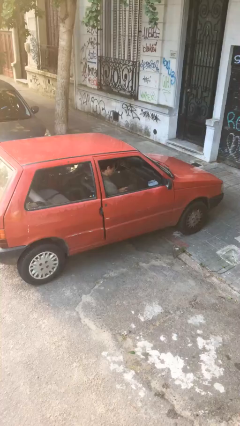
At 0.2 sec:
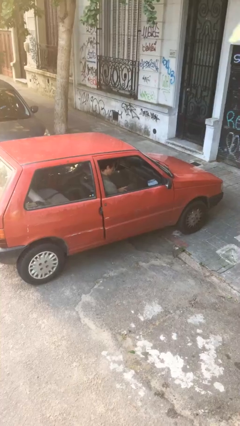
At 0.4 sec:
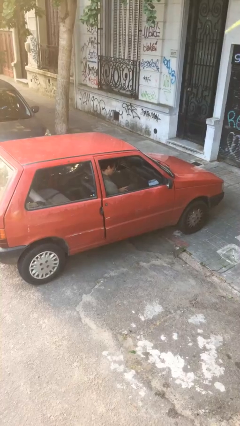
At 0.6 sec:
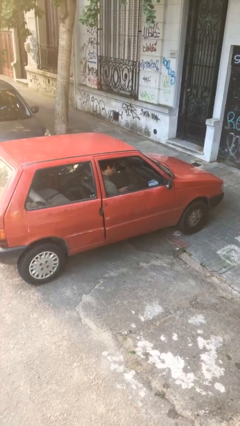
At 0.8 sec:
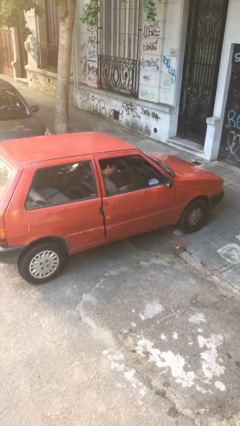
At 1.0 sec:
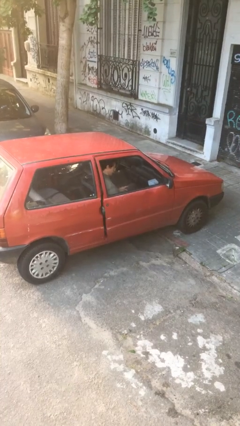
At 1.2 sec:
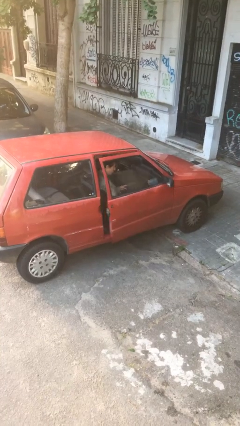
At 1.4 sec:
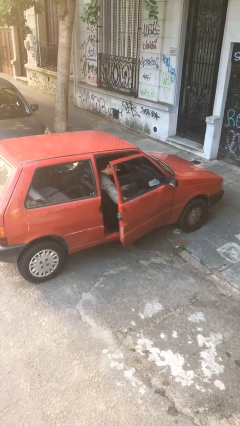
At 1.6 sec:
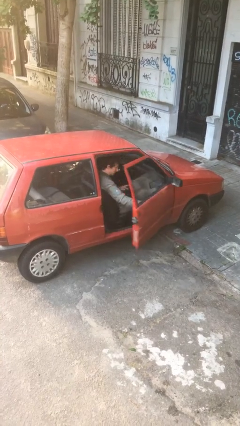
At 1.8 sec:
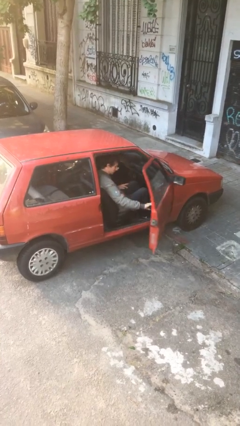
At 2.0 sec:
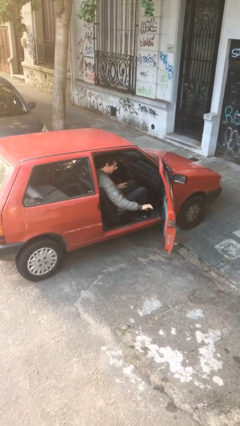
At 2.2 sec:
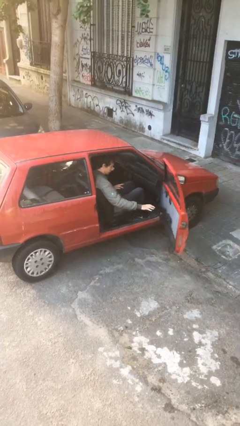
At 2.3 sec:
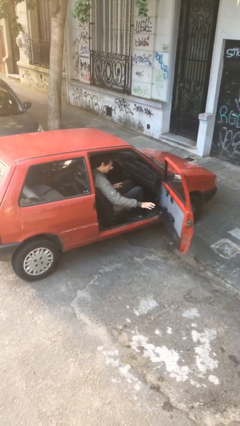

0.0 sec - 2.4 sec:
person opens car door

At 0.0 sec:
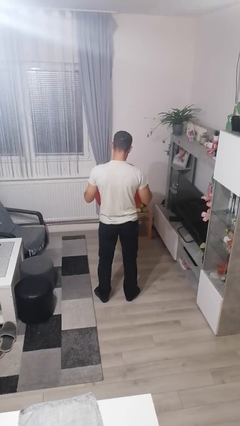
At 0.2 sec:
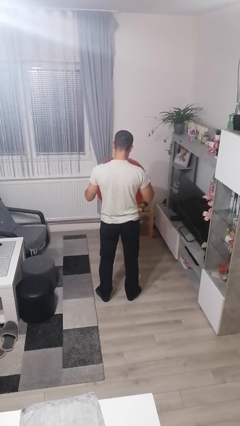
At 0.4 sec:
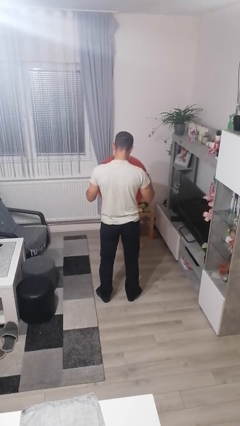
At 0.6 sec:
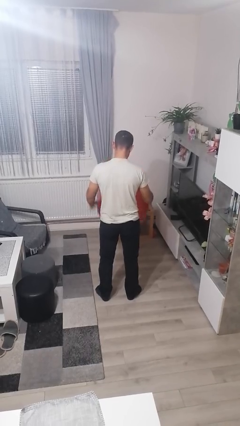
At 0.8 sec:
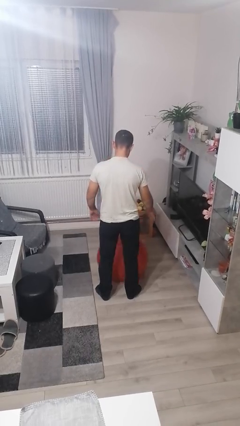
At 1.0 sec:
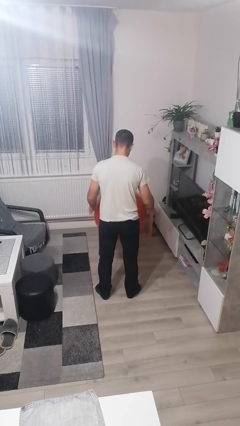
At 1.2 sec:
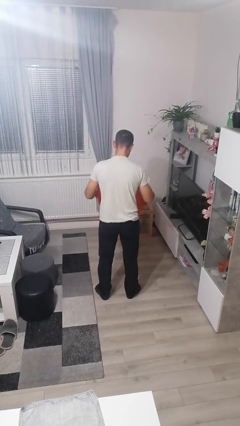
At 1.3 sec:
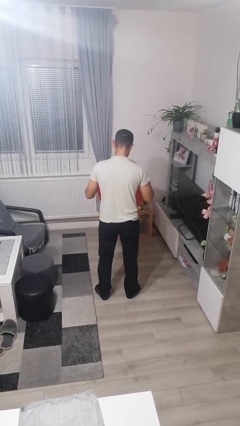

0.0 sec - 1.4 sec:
person bounces ball on floor

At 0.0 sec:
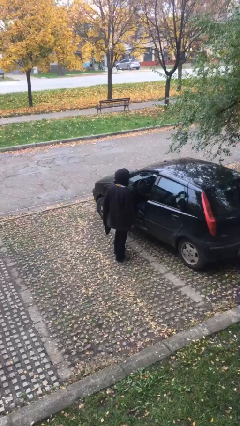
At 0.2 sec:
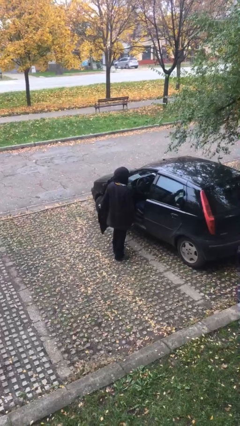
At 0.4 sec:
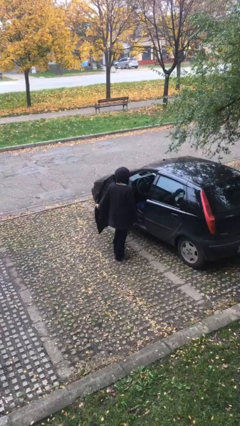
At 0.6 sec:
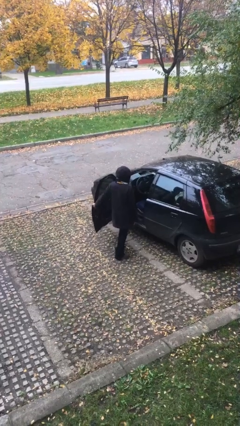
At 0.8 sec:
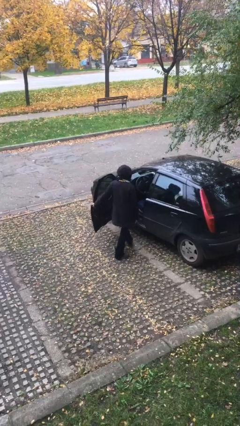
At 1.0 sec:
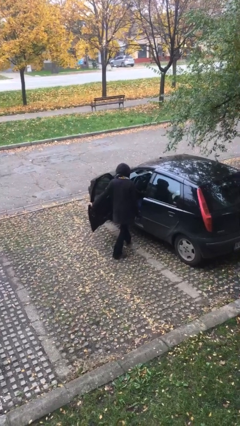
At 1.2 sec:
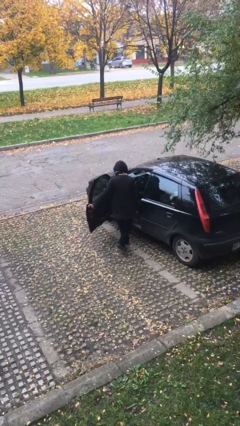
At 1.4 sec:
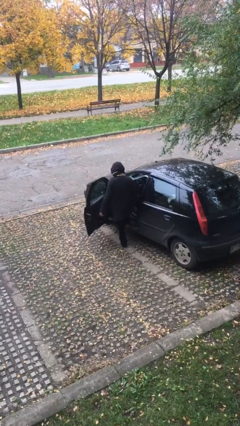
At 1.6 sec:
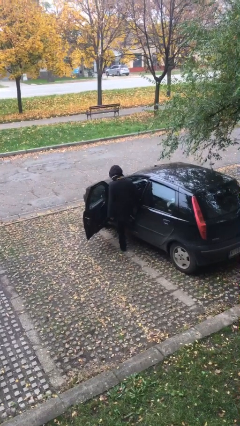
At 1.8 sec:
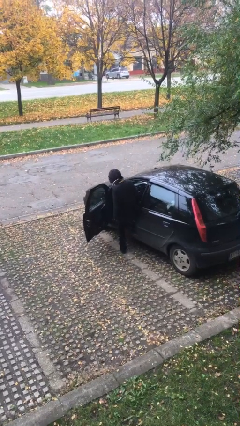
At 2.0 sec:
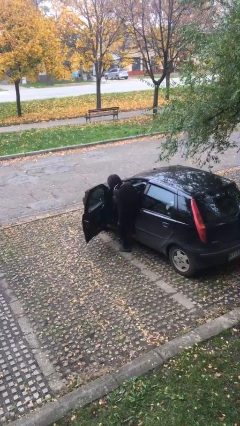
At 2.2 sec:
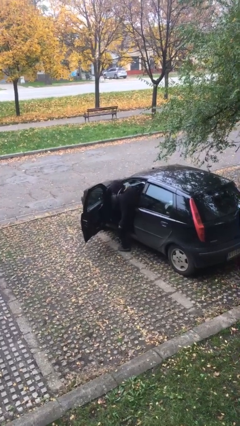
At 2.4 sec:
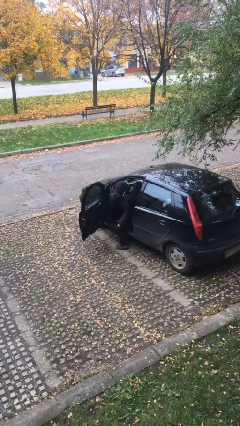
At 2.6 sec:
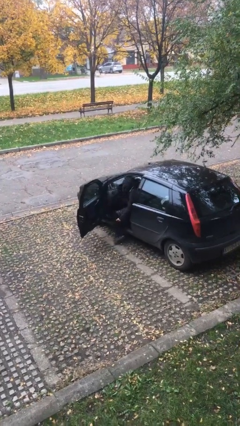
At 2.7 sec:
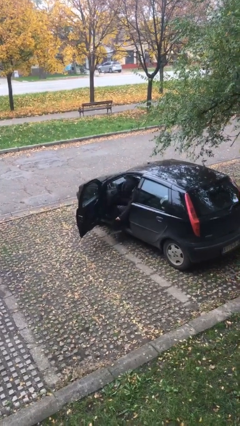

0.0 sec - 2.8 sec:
person enters car

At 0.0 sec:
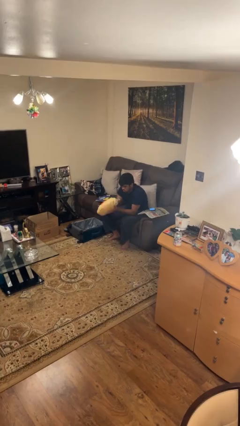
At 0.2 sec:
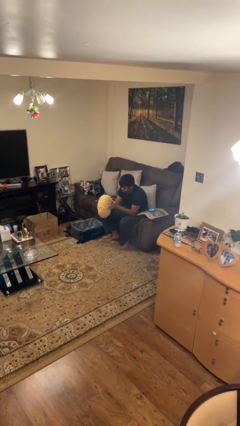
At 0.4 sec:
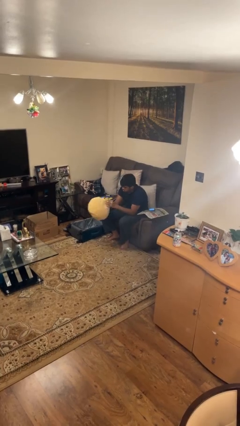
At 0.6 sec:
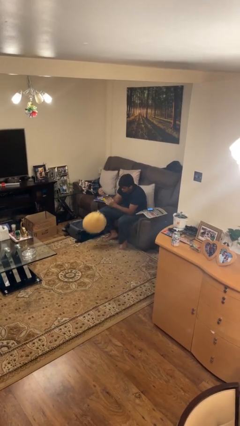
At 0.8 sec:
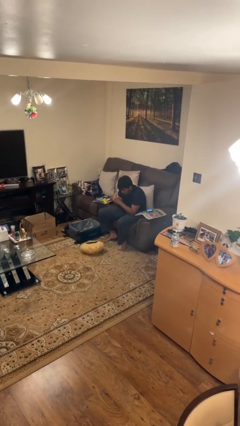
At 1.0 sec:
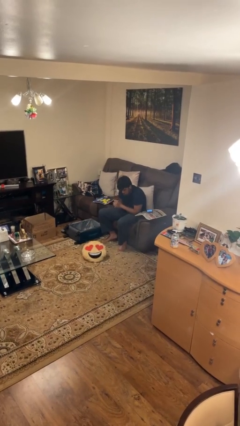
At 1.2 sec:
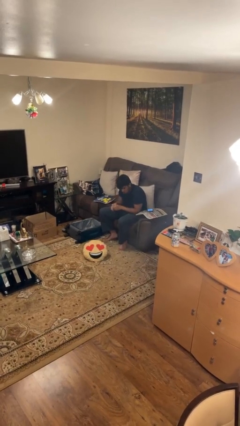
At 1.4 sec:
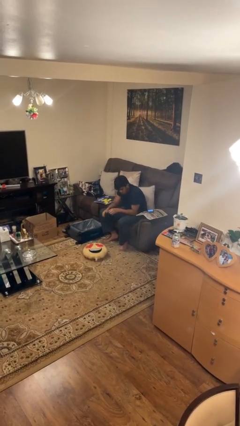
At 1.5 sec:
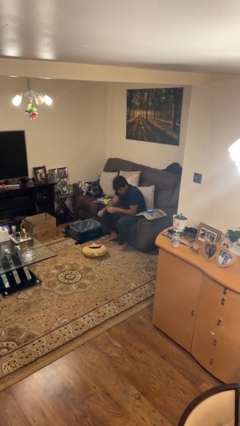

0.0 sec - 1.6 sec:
person drops object

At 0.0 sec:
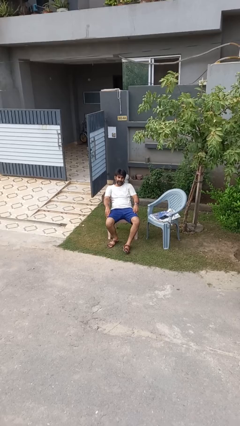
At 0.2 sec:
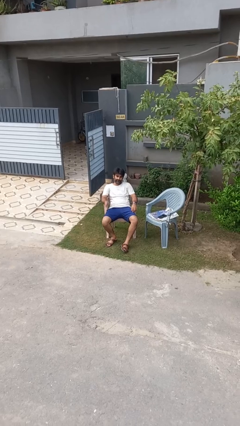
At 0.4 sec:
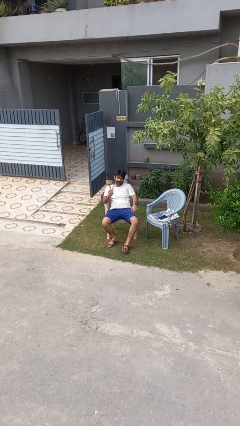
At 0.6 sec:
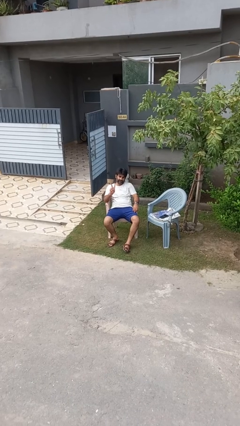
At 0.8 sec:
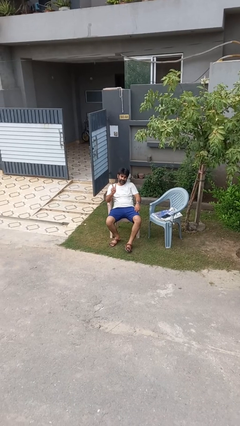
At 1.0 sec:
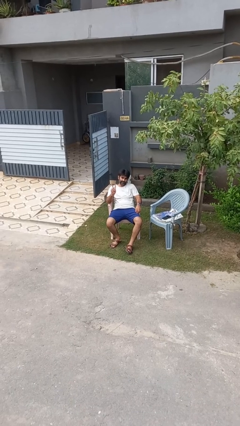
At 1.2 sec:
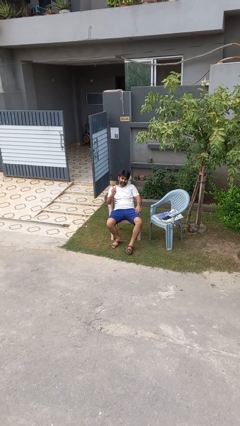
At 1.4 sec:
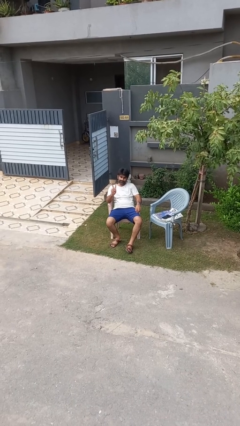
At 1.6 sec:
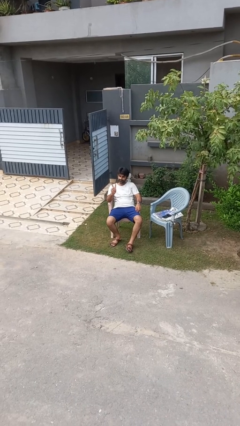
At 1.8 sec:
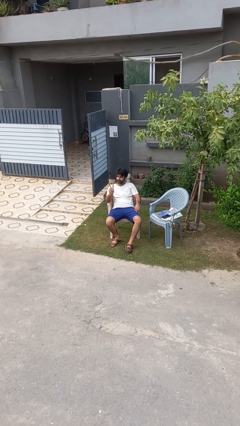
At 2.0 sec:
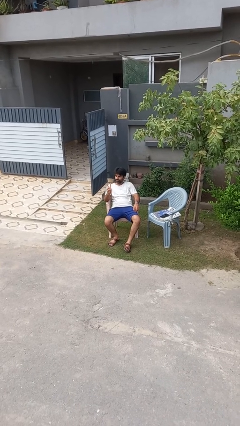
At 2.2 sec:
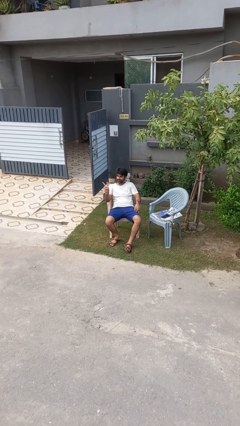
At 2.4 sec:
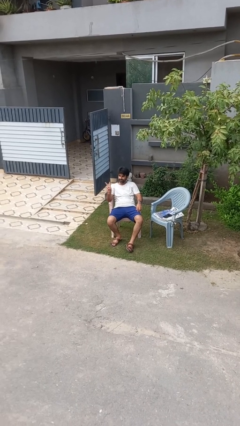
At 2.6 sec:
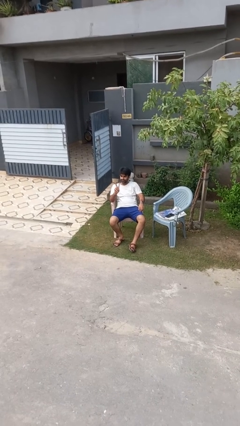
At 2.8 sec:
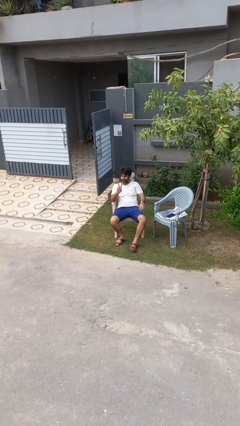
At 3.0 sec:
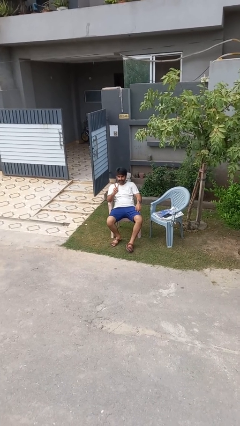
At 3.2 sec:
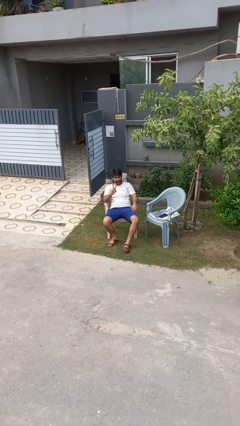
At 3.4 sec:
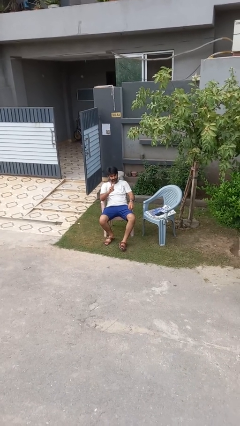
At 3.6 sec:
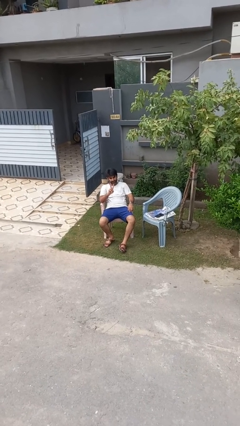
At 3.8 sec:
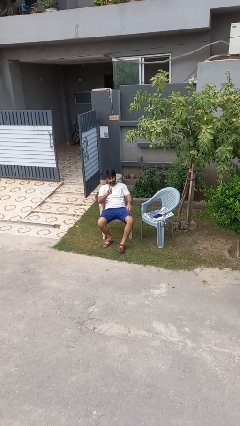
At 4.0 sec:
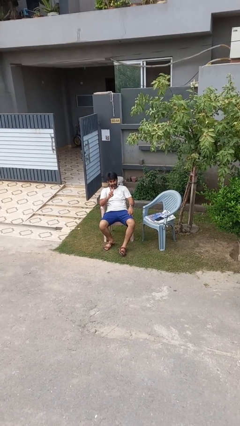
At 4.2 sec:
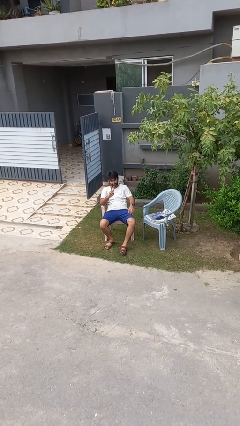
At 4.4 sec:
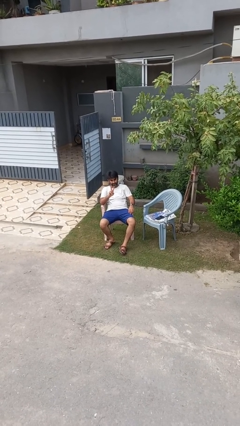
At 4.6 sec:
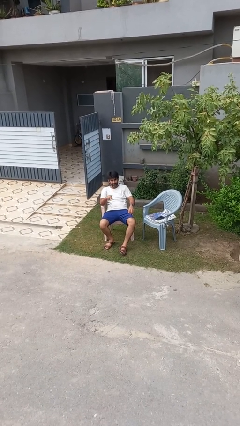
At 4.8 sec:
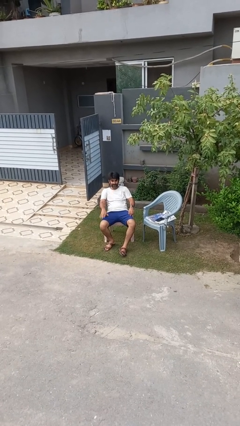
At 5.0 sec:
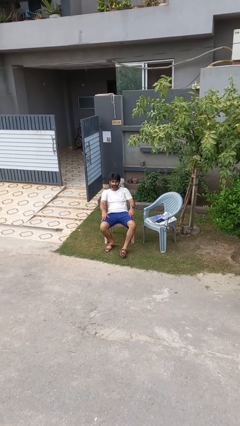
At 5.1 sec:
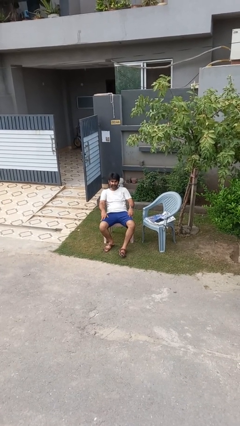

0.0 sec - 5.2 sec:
person gestures peace

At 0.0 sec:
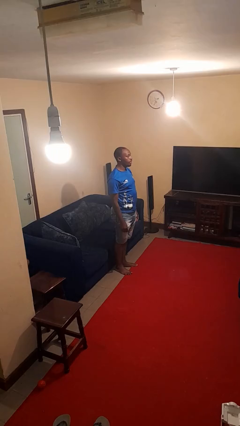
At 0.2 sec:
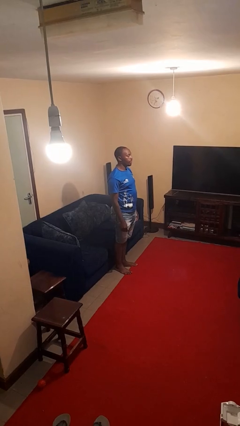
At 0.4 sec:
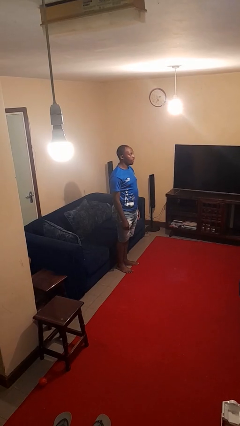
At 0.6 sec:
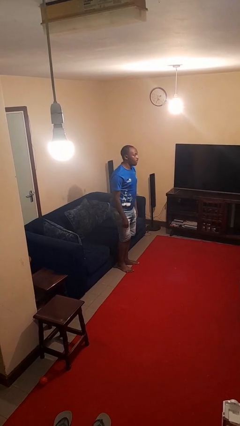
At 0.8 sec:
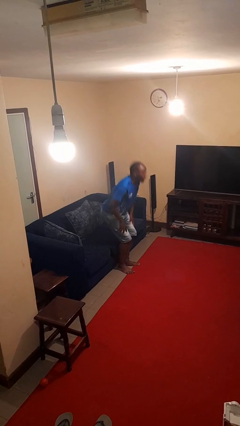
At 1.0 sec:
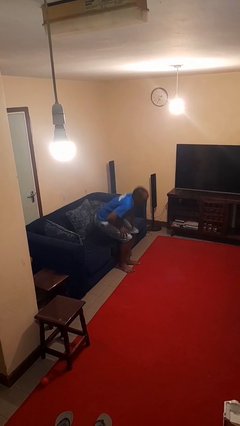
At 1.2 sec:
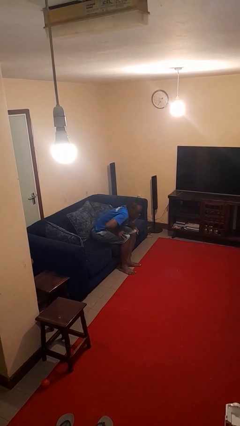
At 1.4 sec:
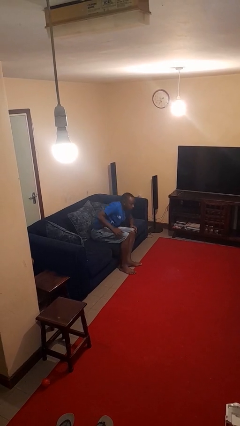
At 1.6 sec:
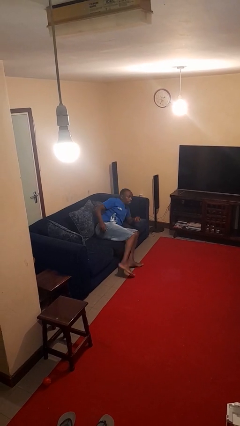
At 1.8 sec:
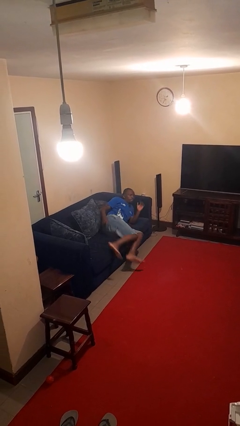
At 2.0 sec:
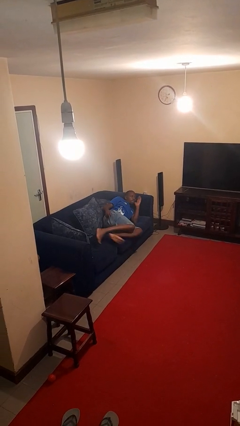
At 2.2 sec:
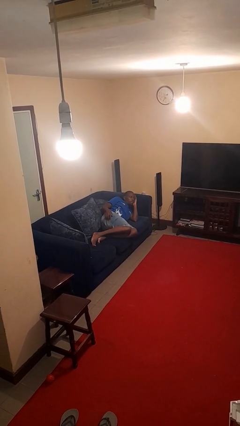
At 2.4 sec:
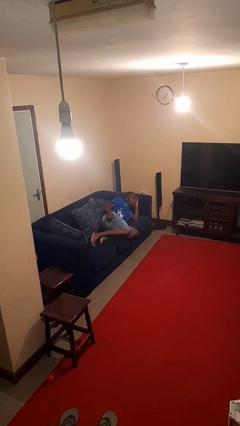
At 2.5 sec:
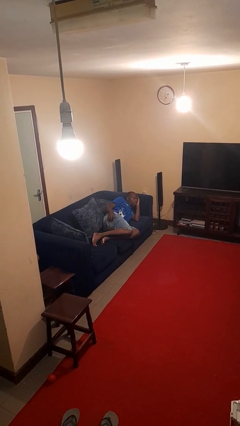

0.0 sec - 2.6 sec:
person lies down on couch

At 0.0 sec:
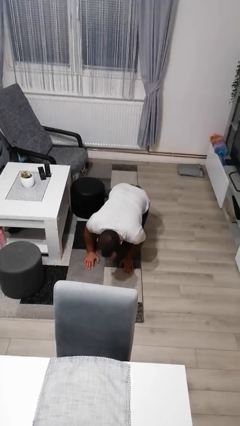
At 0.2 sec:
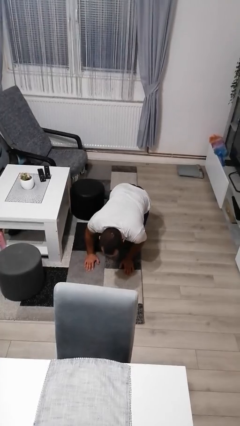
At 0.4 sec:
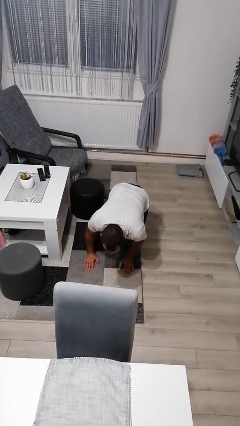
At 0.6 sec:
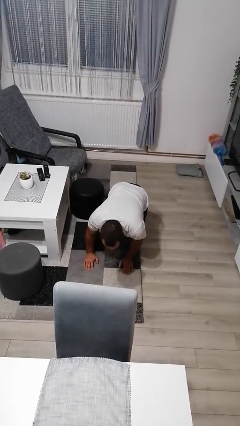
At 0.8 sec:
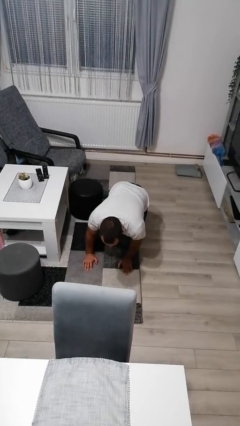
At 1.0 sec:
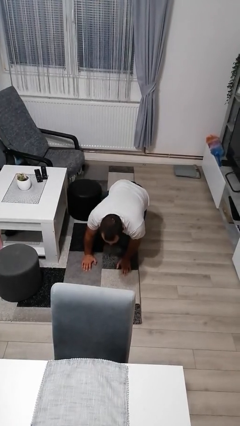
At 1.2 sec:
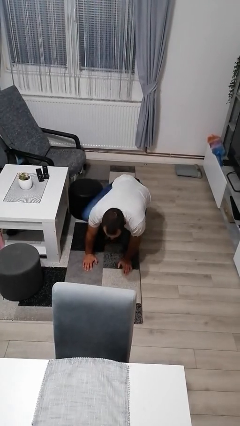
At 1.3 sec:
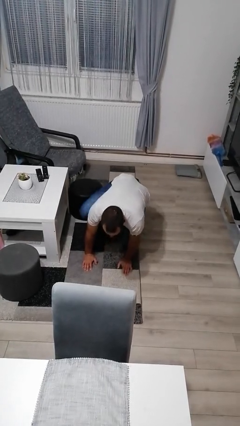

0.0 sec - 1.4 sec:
person lies down on floor
